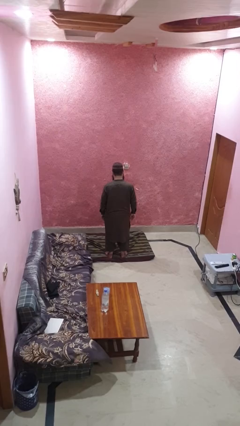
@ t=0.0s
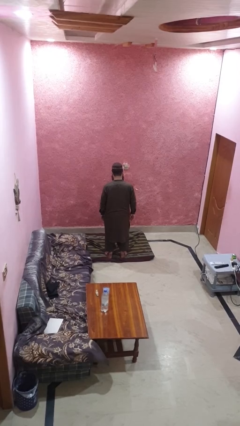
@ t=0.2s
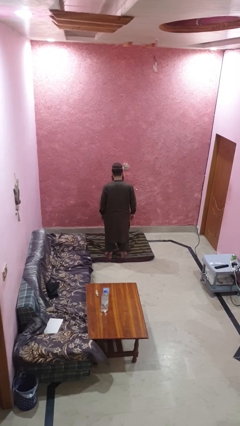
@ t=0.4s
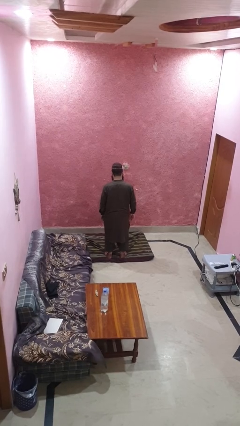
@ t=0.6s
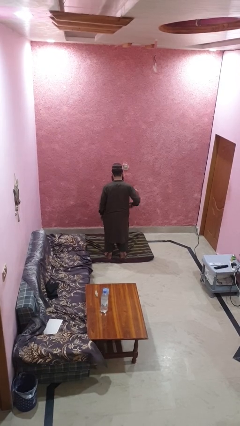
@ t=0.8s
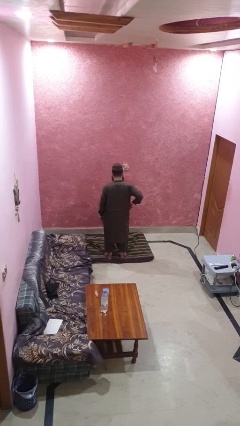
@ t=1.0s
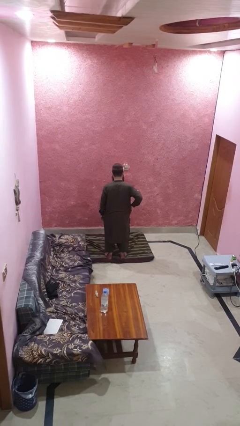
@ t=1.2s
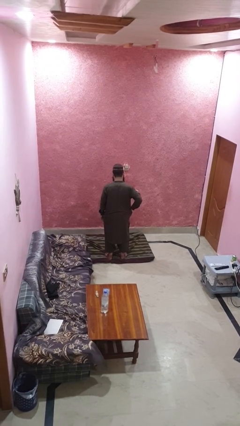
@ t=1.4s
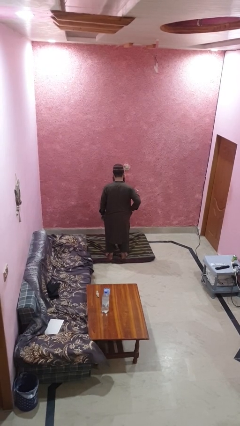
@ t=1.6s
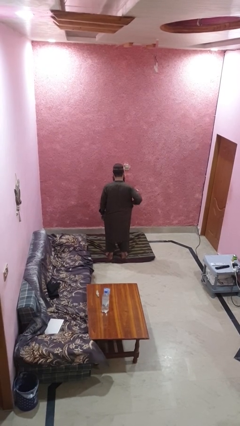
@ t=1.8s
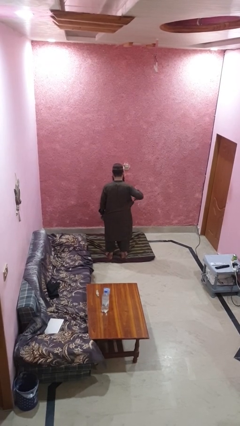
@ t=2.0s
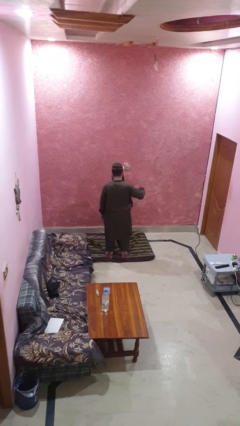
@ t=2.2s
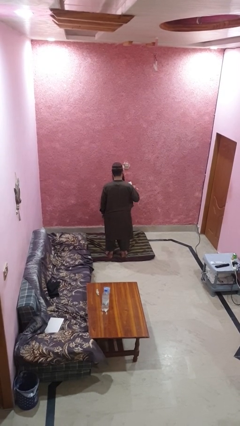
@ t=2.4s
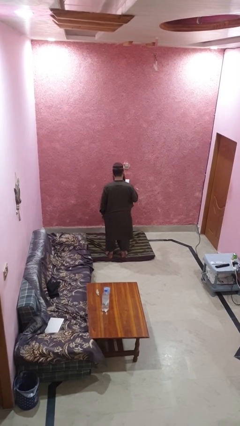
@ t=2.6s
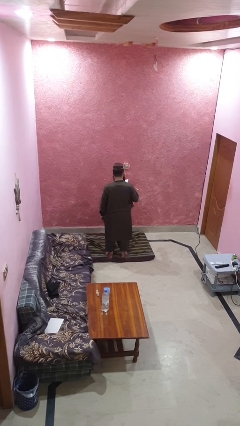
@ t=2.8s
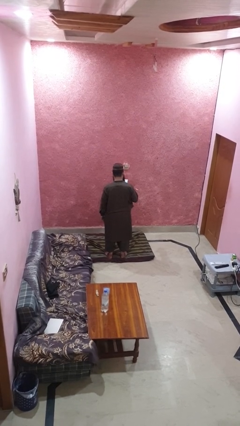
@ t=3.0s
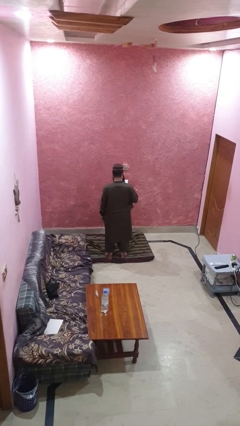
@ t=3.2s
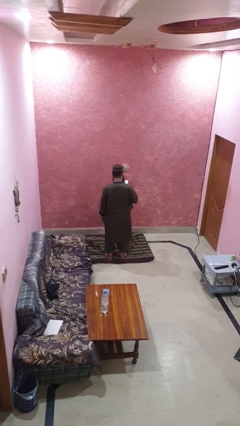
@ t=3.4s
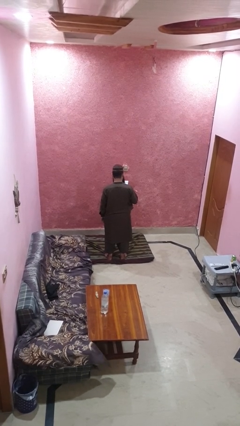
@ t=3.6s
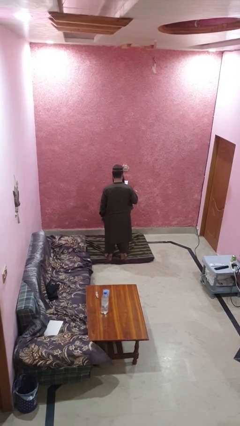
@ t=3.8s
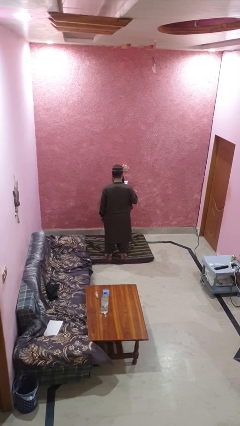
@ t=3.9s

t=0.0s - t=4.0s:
person takes phone from pocket

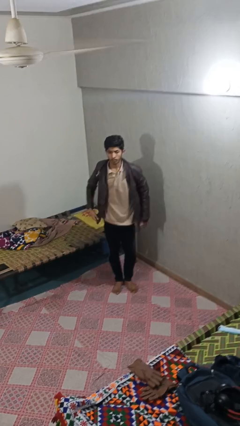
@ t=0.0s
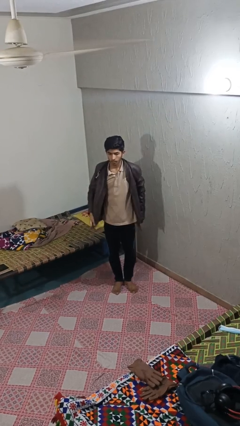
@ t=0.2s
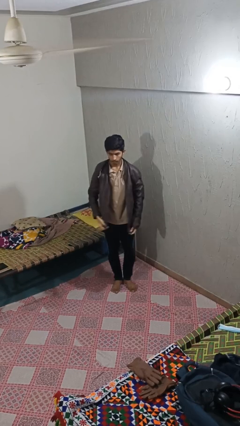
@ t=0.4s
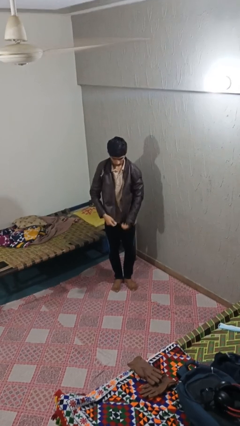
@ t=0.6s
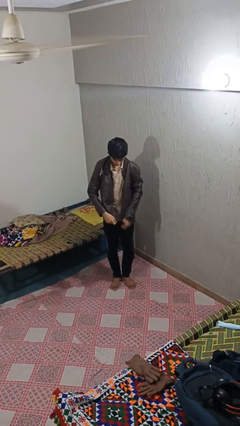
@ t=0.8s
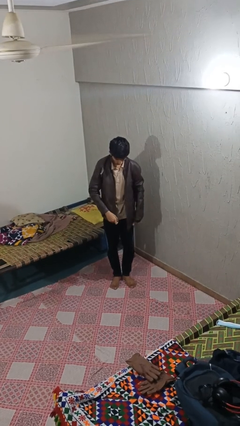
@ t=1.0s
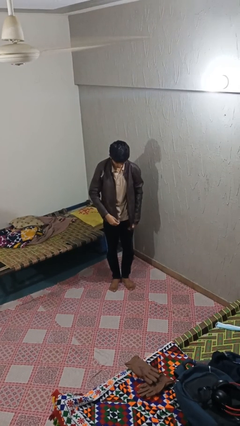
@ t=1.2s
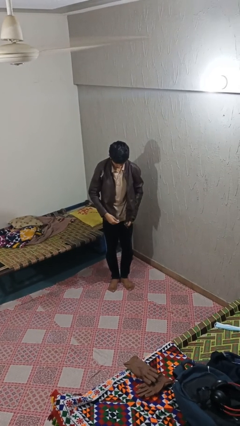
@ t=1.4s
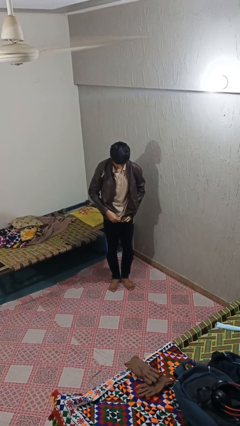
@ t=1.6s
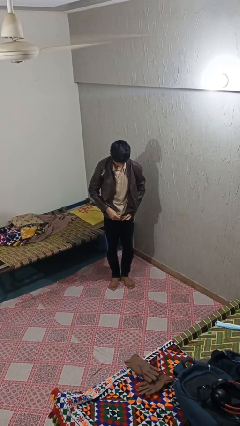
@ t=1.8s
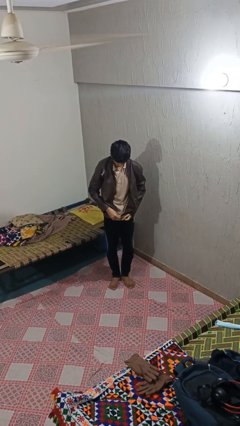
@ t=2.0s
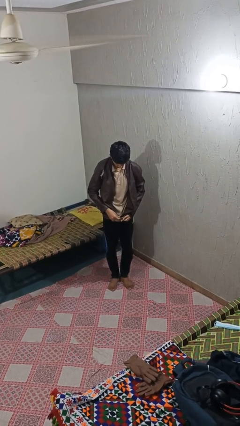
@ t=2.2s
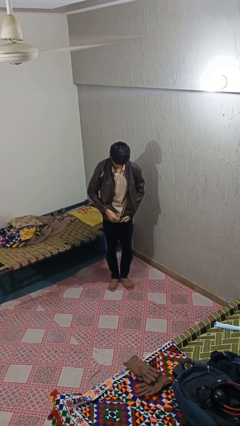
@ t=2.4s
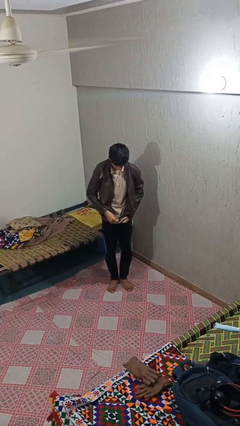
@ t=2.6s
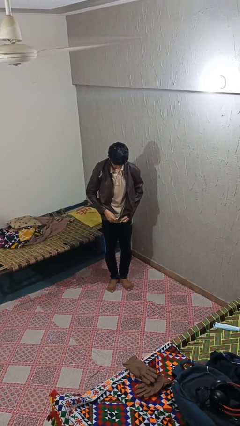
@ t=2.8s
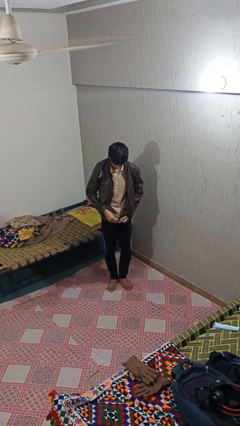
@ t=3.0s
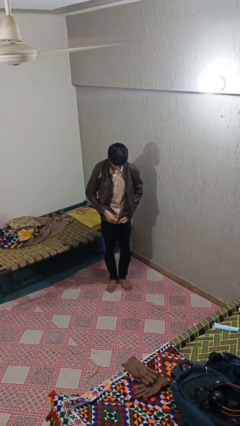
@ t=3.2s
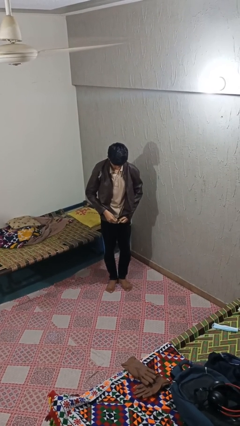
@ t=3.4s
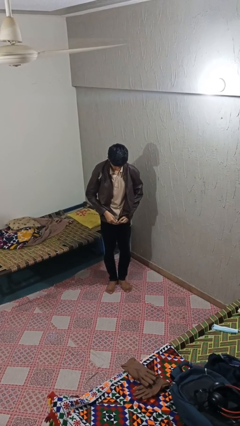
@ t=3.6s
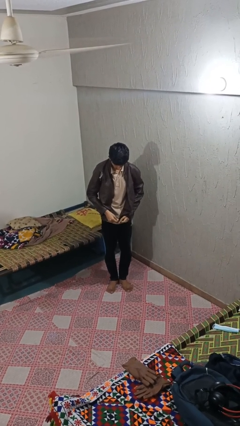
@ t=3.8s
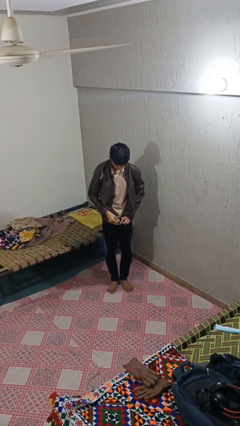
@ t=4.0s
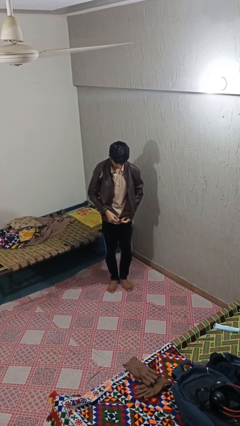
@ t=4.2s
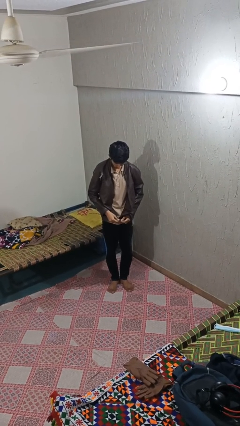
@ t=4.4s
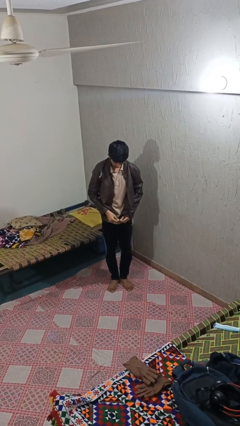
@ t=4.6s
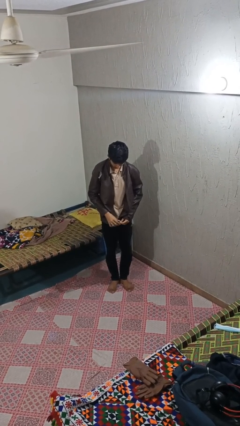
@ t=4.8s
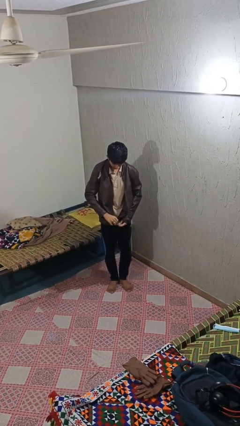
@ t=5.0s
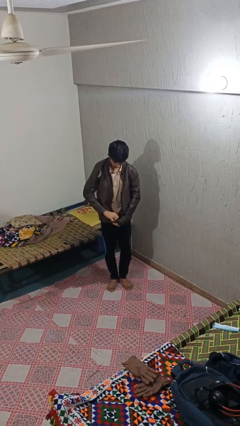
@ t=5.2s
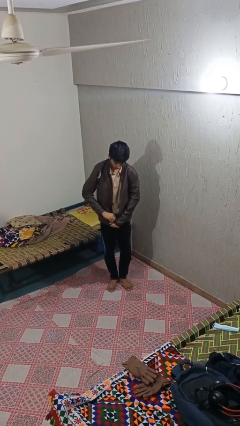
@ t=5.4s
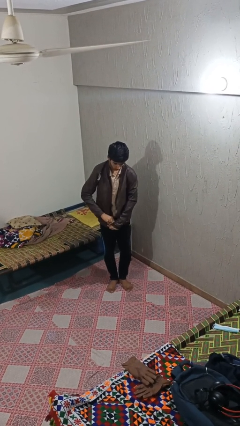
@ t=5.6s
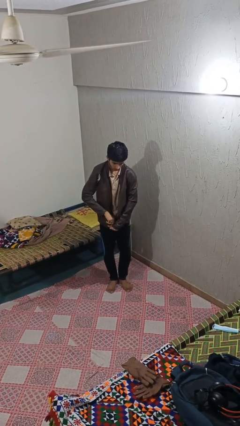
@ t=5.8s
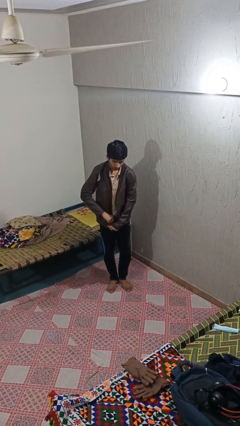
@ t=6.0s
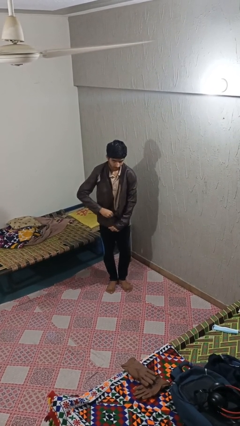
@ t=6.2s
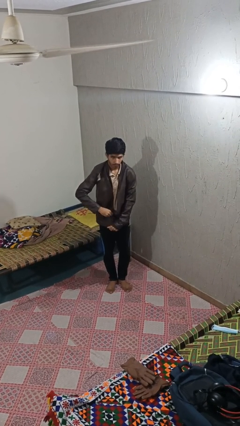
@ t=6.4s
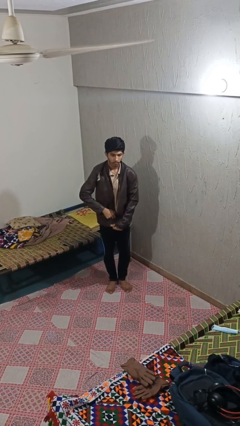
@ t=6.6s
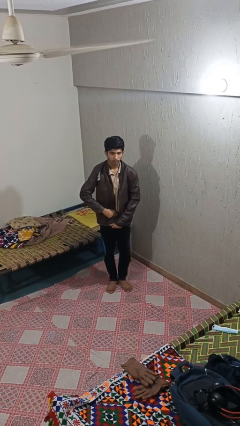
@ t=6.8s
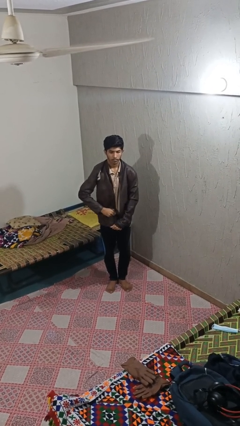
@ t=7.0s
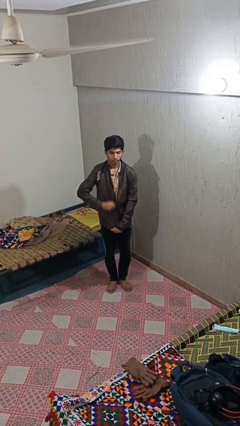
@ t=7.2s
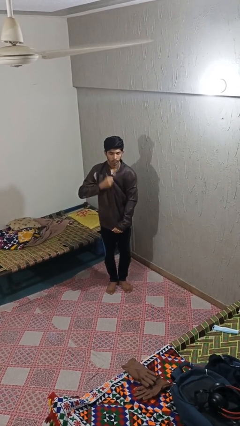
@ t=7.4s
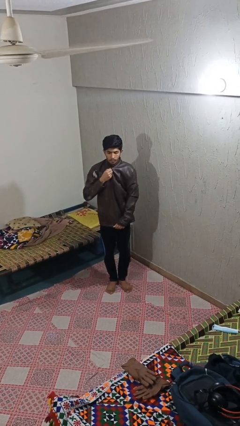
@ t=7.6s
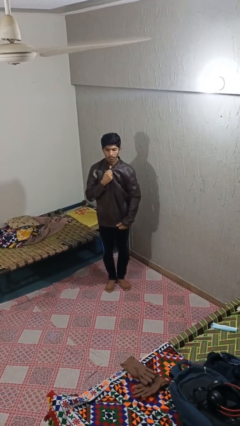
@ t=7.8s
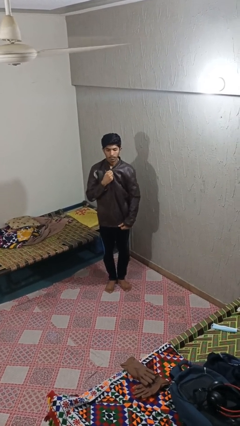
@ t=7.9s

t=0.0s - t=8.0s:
person zips up jacket

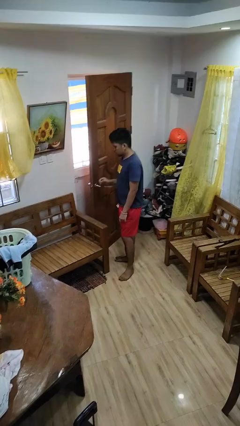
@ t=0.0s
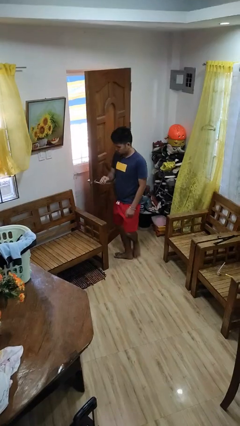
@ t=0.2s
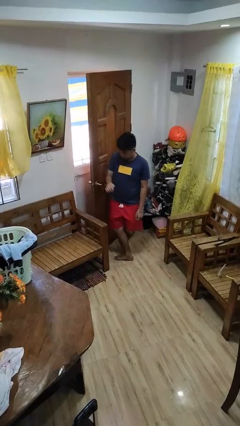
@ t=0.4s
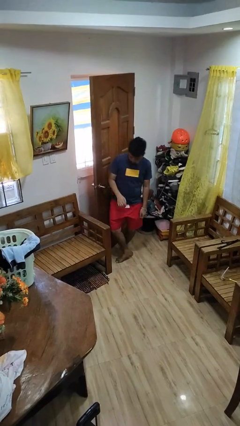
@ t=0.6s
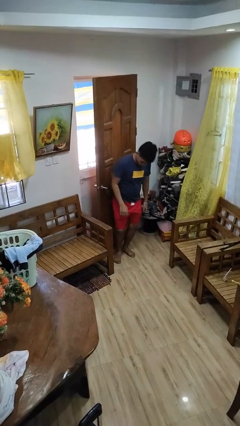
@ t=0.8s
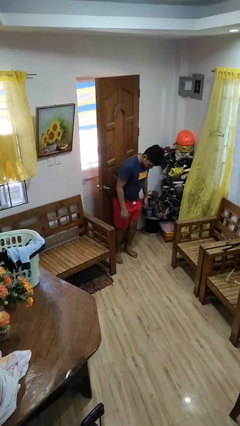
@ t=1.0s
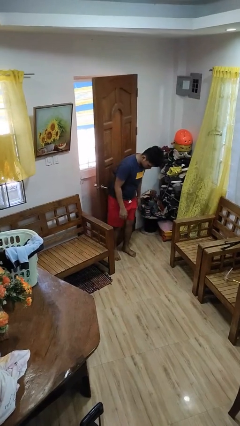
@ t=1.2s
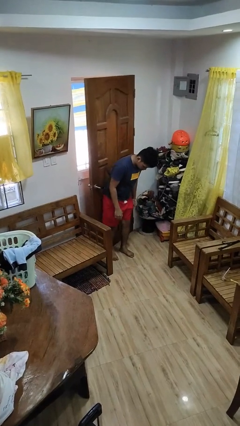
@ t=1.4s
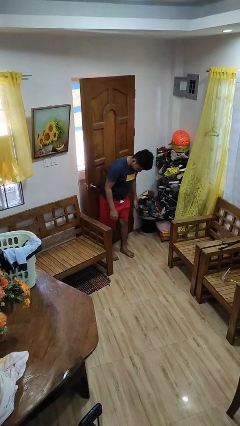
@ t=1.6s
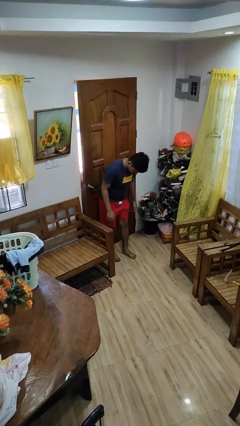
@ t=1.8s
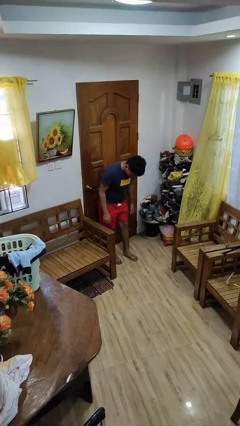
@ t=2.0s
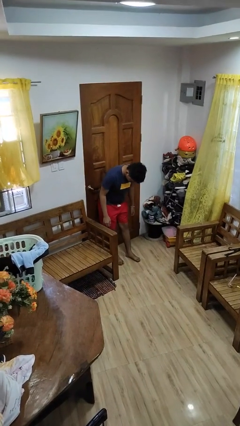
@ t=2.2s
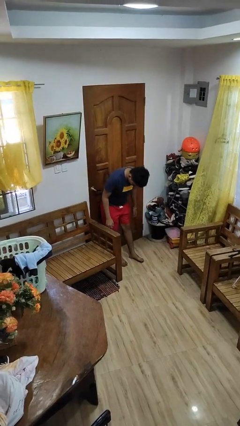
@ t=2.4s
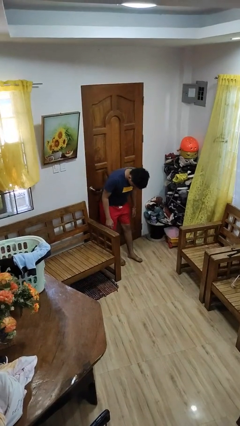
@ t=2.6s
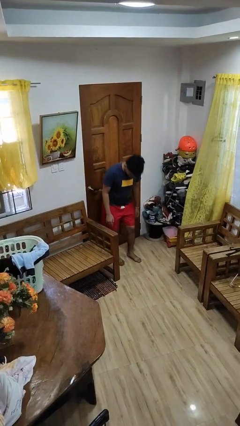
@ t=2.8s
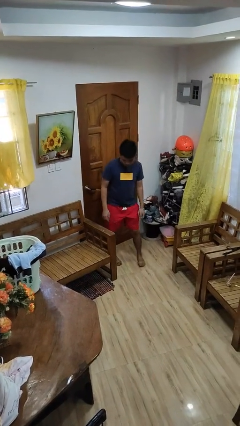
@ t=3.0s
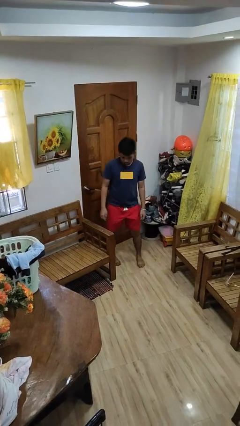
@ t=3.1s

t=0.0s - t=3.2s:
person closes door with hip

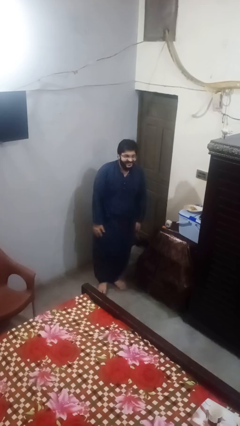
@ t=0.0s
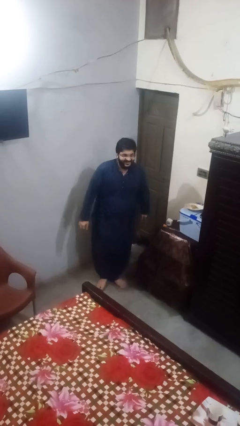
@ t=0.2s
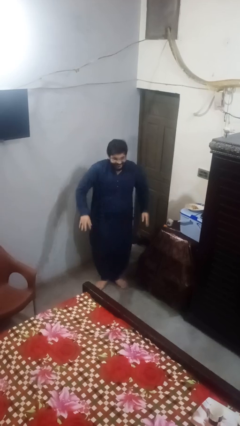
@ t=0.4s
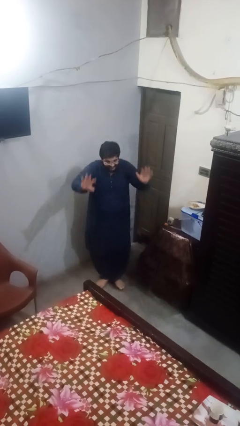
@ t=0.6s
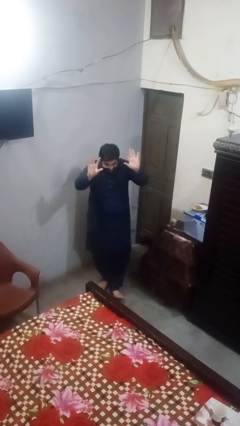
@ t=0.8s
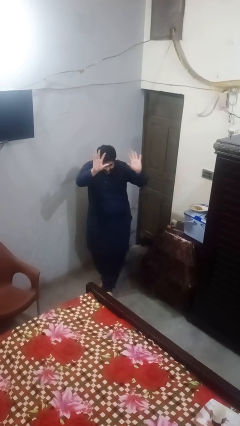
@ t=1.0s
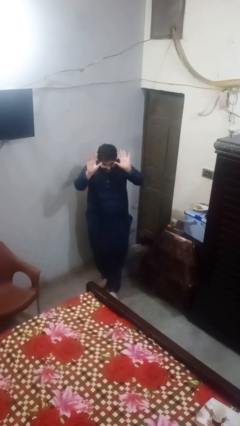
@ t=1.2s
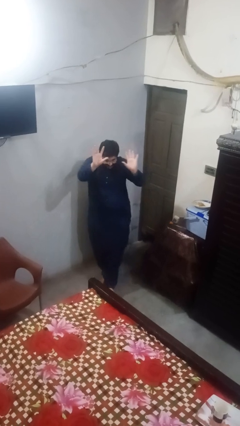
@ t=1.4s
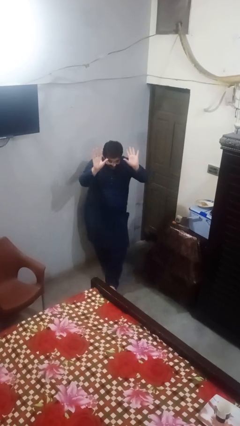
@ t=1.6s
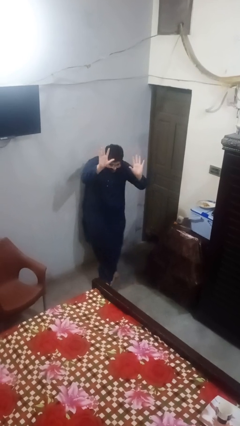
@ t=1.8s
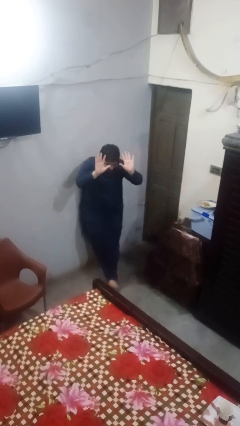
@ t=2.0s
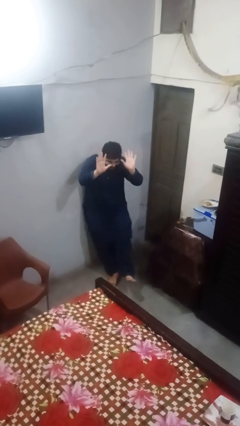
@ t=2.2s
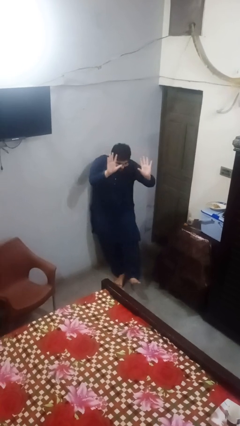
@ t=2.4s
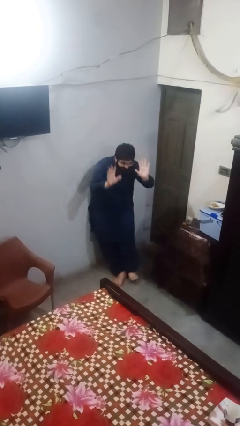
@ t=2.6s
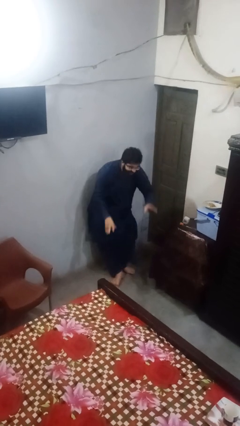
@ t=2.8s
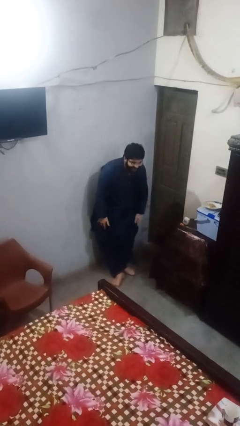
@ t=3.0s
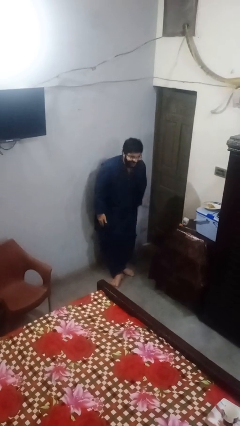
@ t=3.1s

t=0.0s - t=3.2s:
person dances in place
